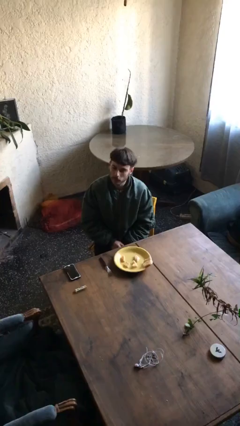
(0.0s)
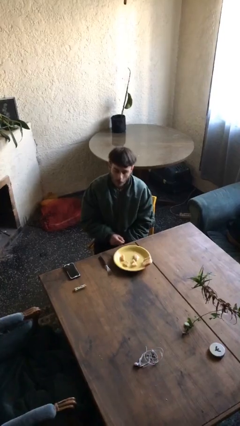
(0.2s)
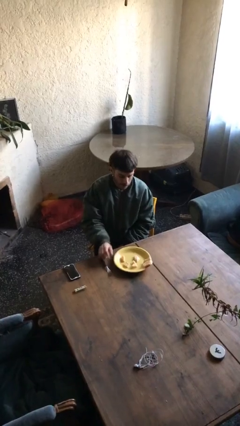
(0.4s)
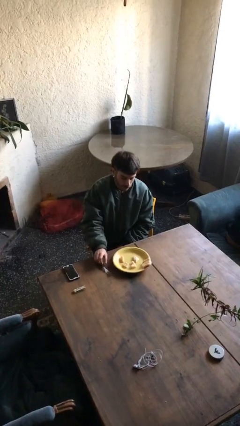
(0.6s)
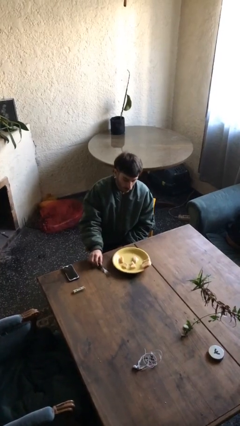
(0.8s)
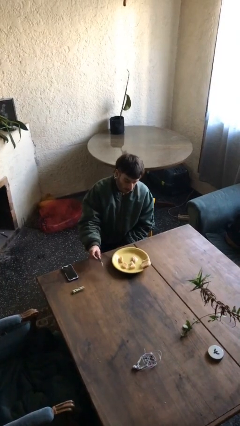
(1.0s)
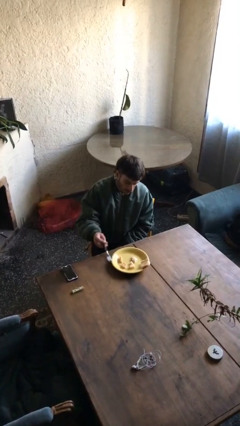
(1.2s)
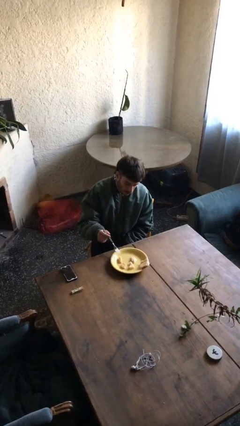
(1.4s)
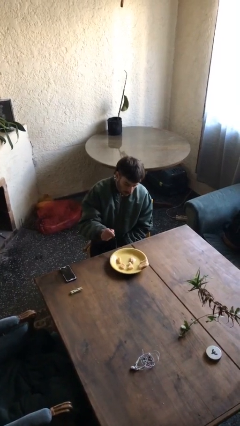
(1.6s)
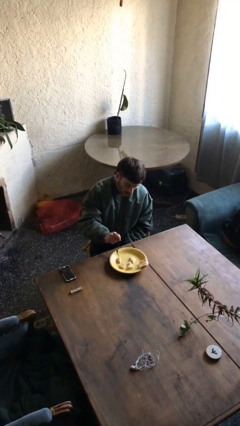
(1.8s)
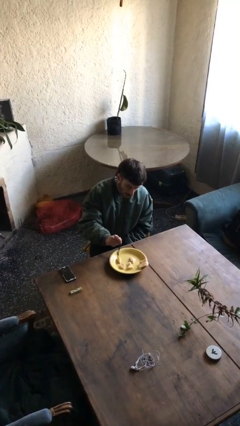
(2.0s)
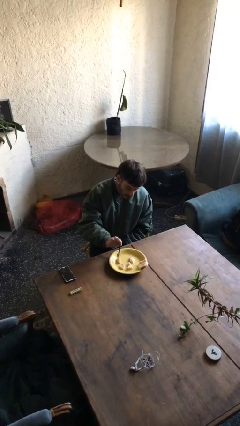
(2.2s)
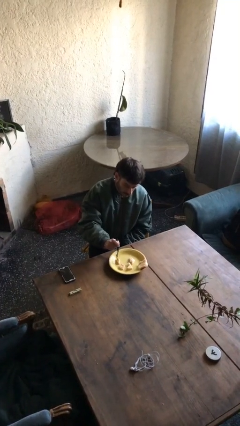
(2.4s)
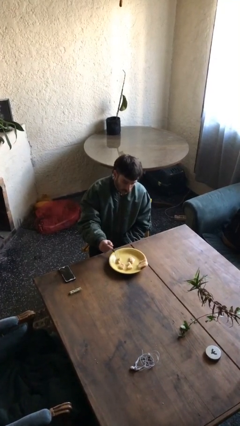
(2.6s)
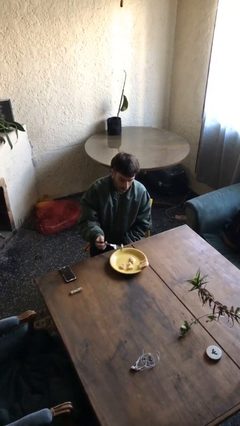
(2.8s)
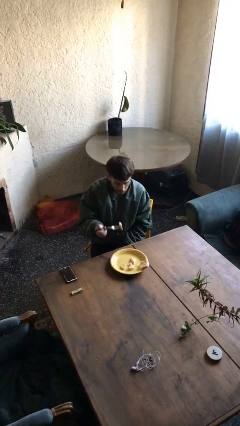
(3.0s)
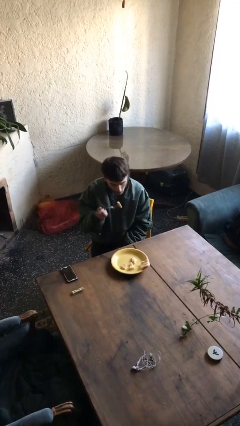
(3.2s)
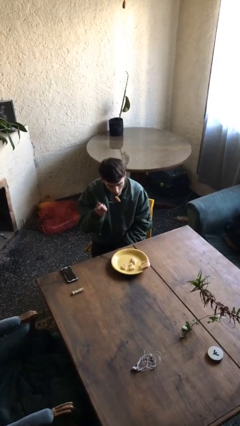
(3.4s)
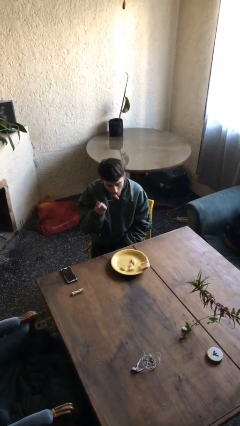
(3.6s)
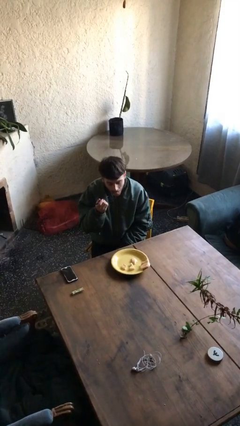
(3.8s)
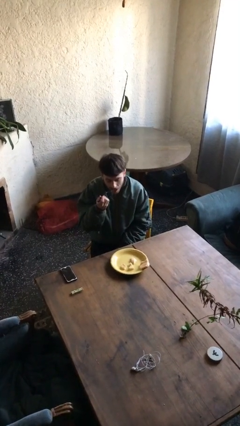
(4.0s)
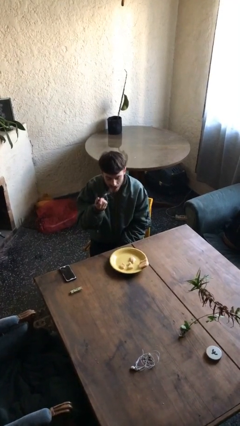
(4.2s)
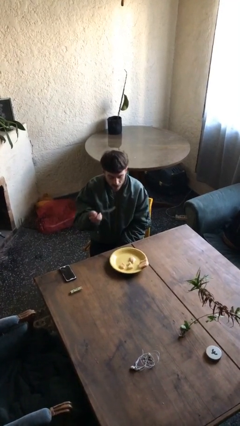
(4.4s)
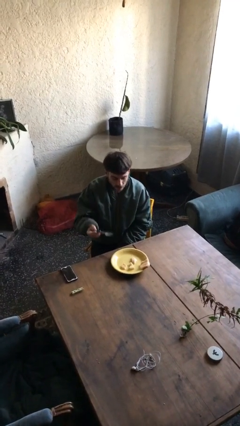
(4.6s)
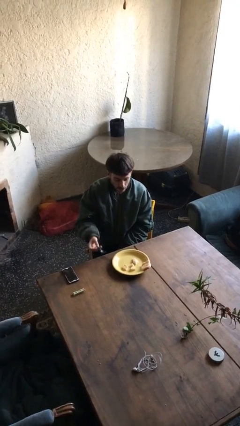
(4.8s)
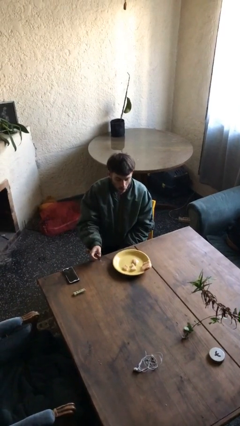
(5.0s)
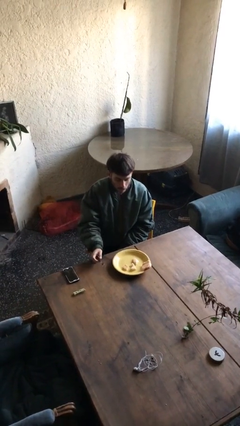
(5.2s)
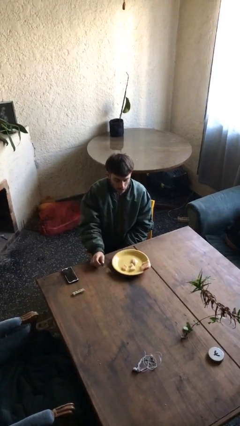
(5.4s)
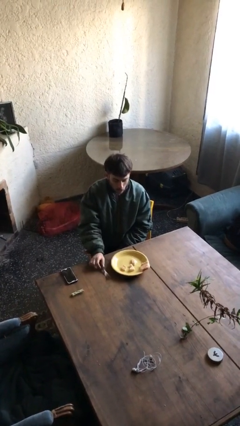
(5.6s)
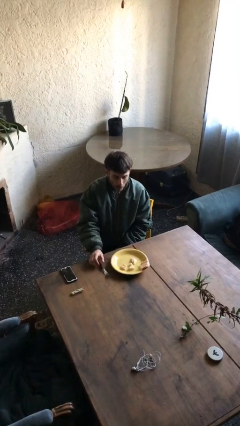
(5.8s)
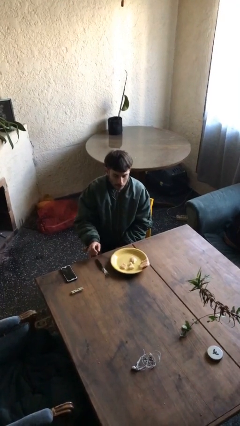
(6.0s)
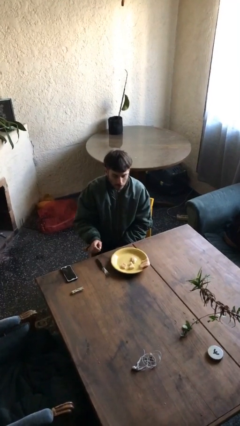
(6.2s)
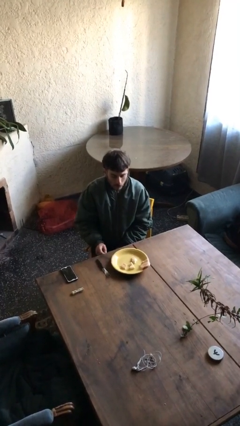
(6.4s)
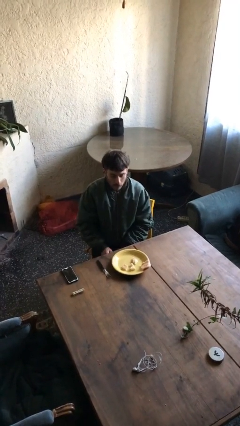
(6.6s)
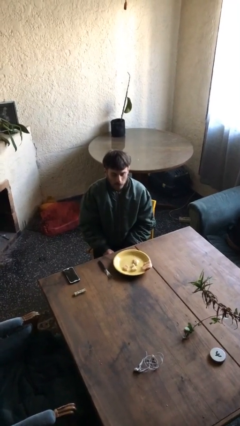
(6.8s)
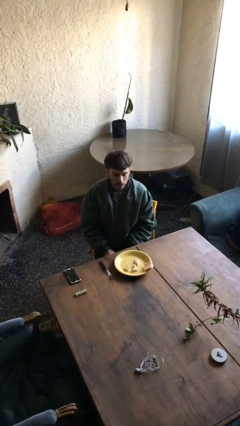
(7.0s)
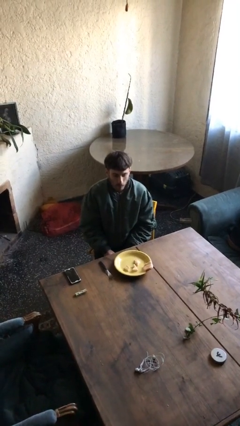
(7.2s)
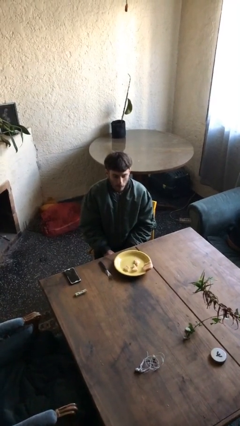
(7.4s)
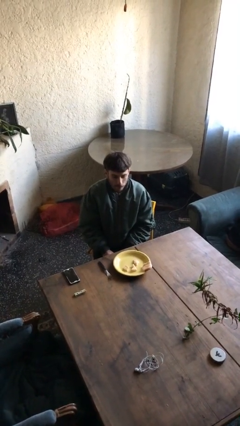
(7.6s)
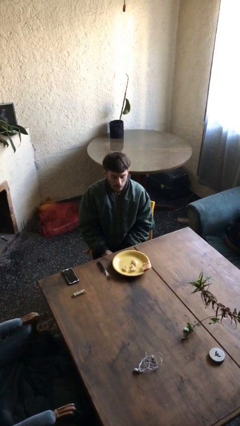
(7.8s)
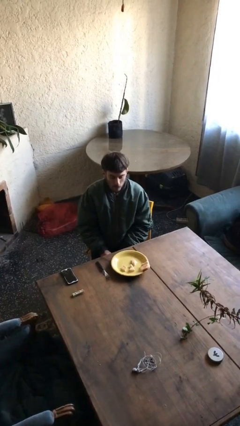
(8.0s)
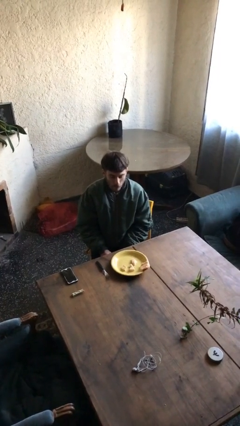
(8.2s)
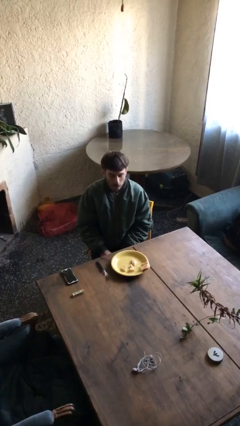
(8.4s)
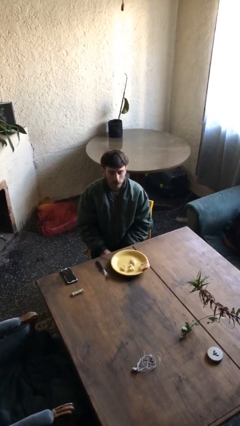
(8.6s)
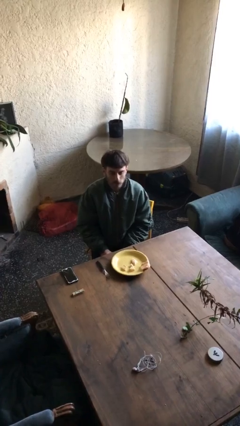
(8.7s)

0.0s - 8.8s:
person eats with utensil

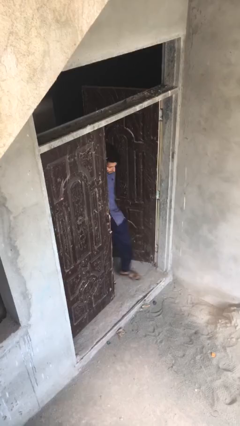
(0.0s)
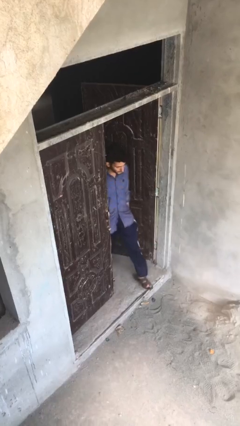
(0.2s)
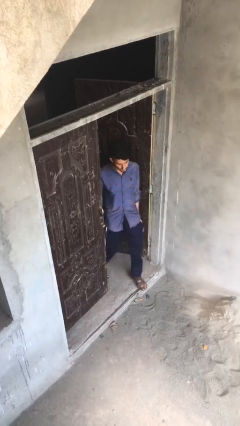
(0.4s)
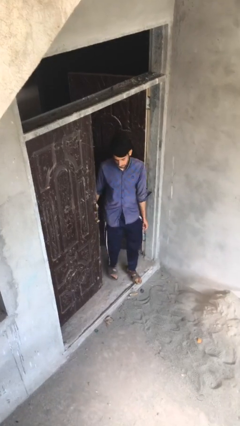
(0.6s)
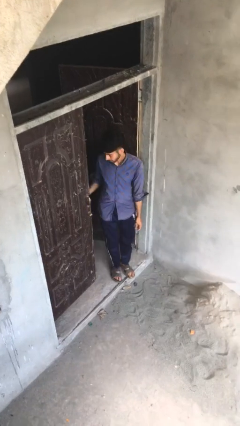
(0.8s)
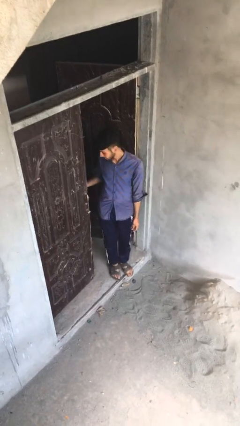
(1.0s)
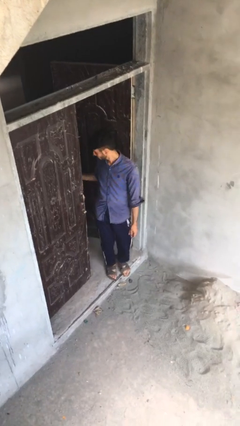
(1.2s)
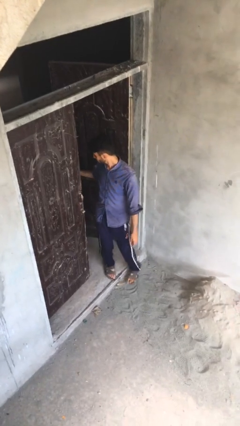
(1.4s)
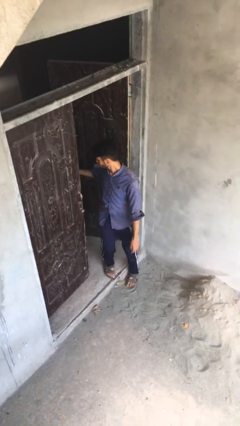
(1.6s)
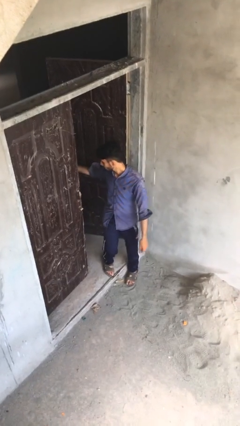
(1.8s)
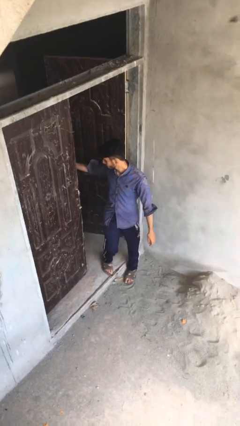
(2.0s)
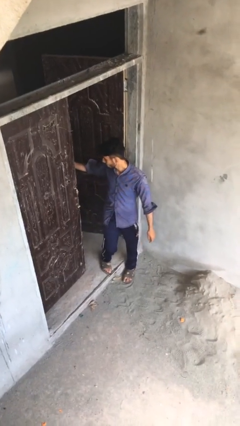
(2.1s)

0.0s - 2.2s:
person enters scene through structure

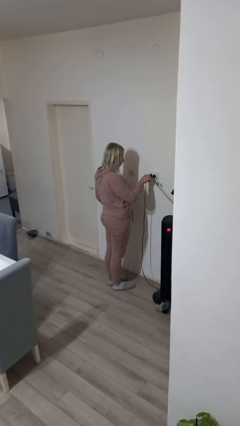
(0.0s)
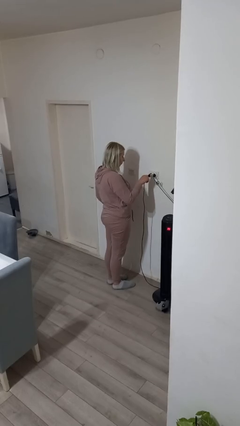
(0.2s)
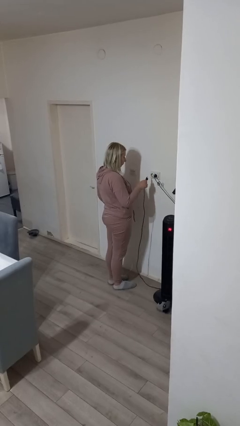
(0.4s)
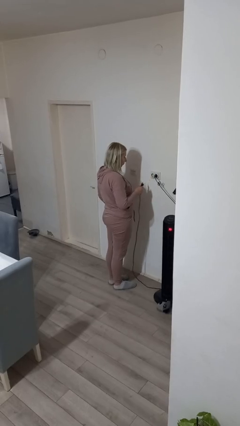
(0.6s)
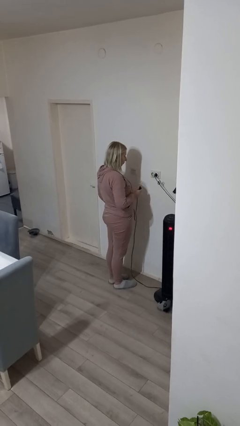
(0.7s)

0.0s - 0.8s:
person unplugs from electrical socket

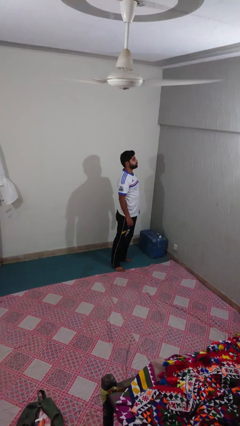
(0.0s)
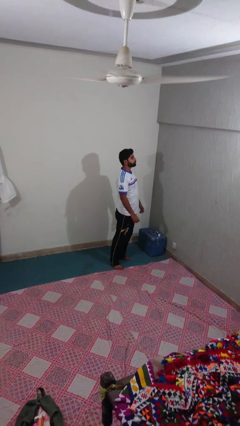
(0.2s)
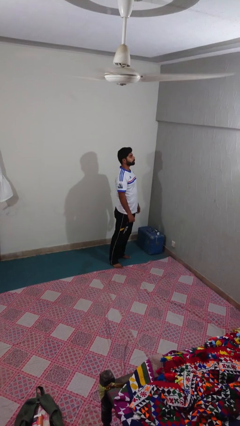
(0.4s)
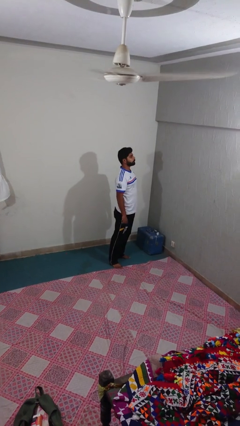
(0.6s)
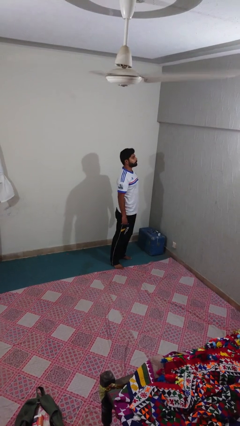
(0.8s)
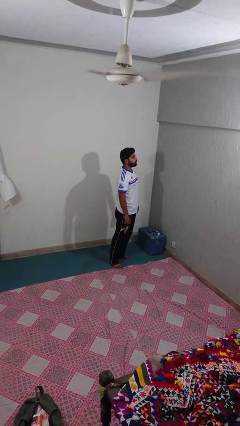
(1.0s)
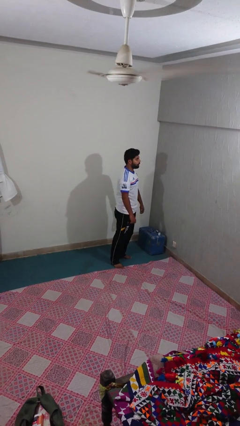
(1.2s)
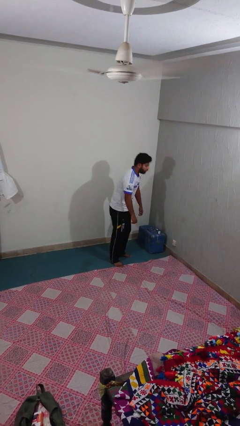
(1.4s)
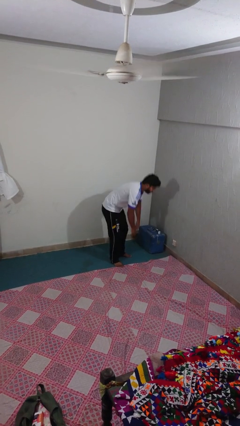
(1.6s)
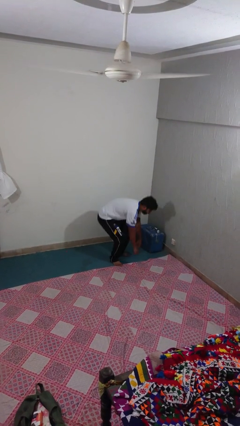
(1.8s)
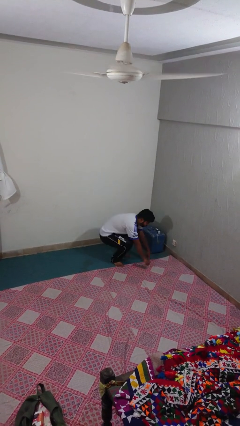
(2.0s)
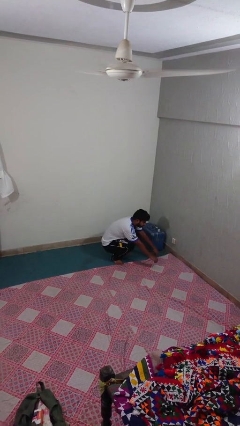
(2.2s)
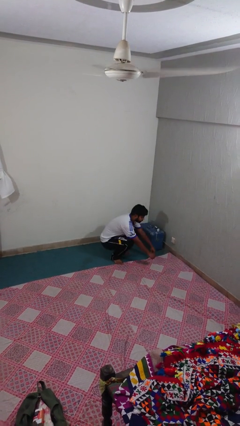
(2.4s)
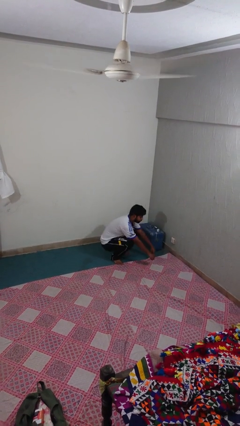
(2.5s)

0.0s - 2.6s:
person squats

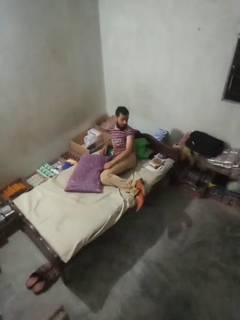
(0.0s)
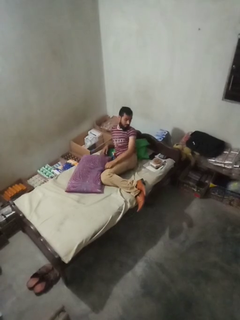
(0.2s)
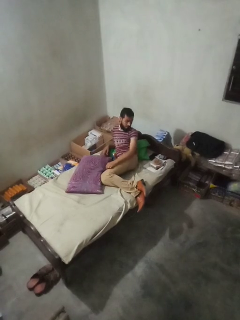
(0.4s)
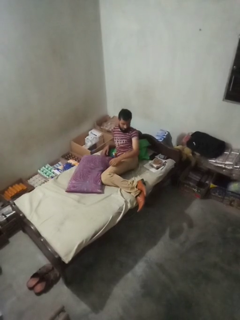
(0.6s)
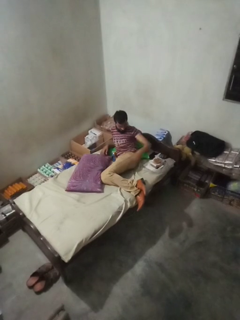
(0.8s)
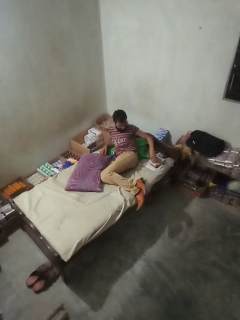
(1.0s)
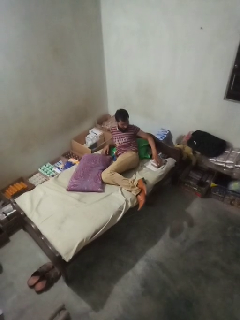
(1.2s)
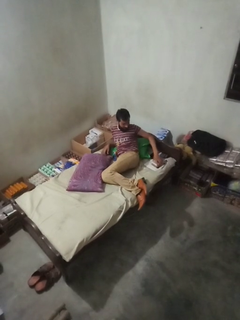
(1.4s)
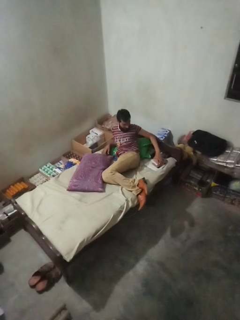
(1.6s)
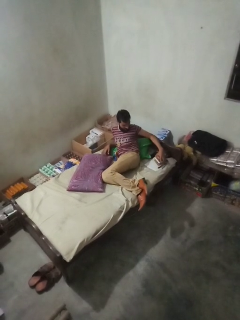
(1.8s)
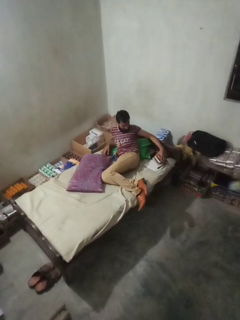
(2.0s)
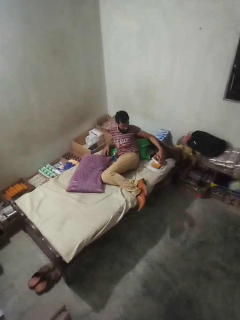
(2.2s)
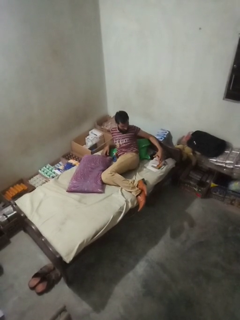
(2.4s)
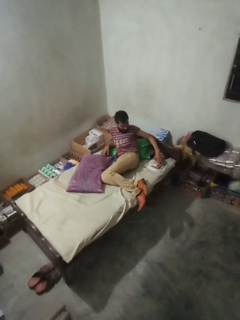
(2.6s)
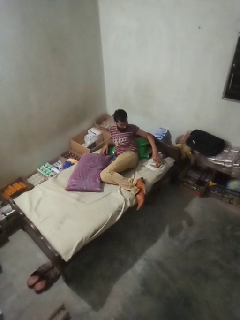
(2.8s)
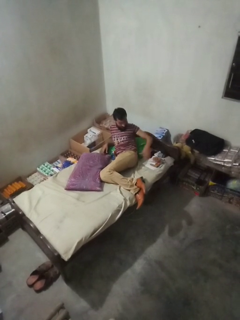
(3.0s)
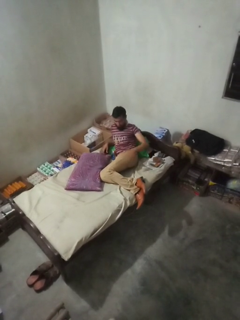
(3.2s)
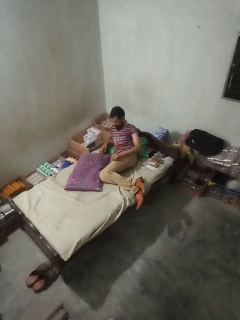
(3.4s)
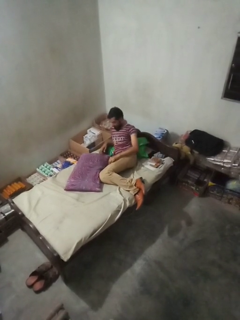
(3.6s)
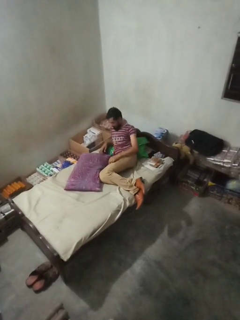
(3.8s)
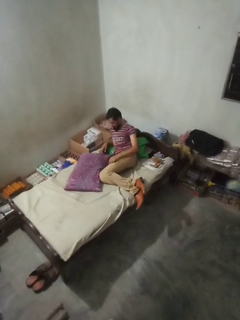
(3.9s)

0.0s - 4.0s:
person searches under bed

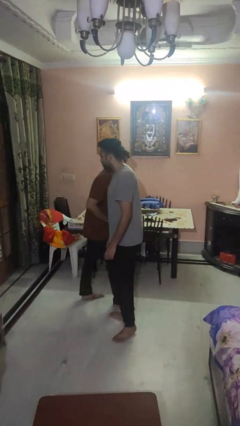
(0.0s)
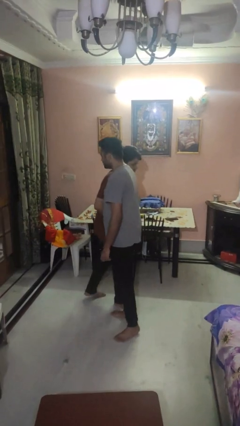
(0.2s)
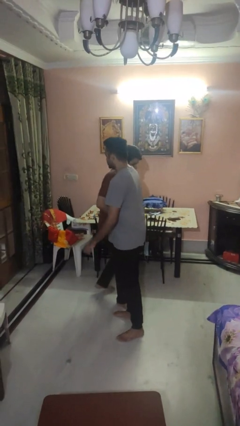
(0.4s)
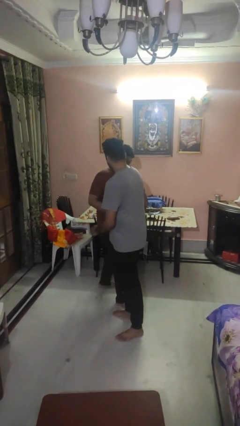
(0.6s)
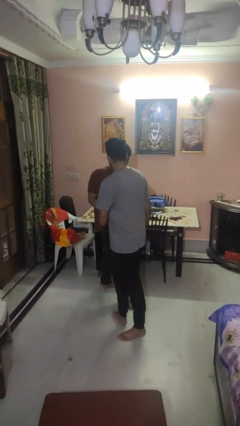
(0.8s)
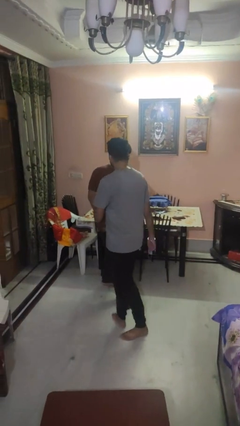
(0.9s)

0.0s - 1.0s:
person bumps into person
